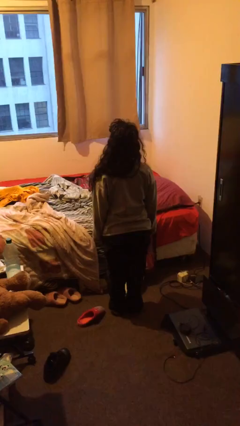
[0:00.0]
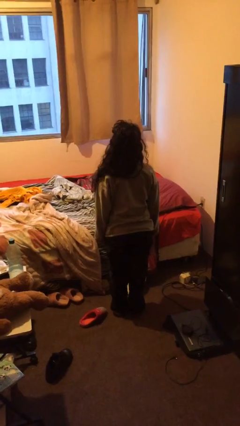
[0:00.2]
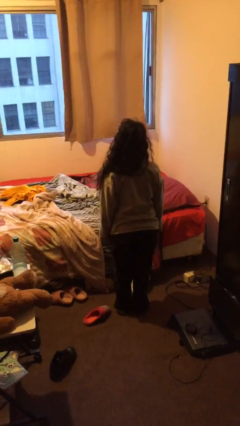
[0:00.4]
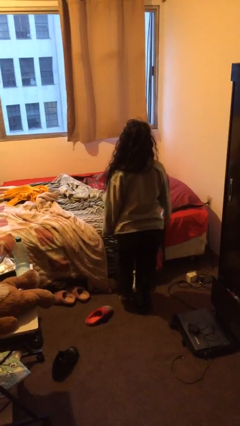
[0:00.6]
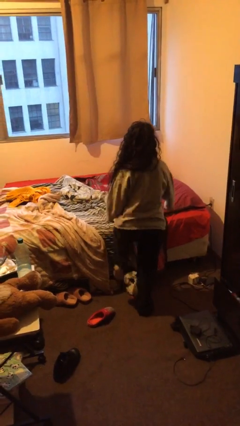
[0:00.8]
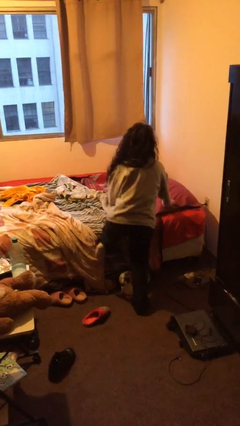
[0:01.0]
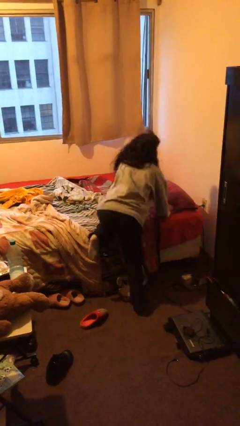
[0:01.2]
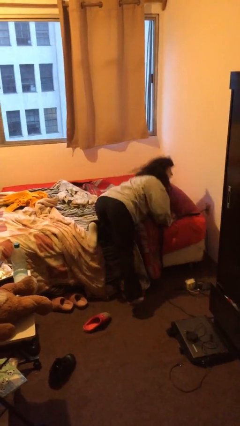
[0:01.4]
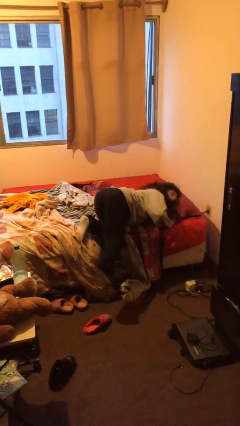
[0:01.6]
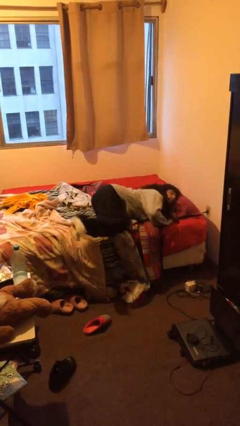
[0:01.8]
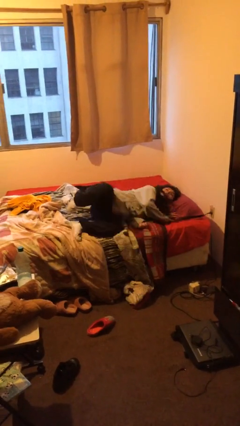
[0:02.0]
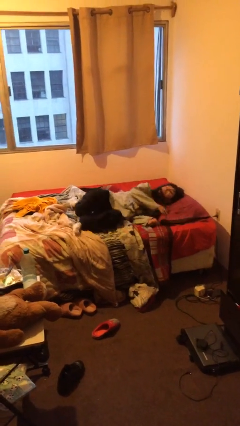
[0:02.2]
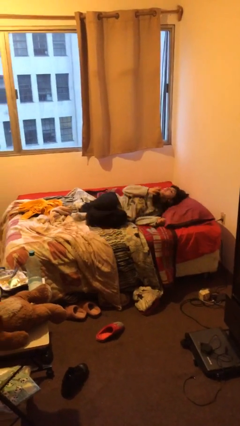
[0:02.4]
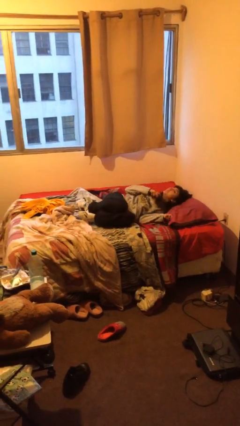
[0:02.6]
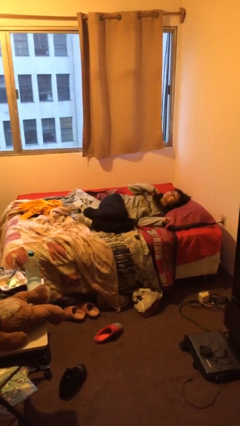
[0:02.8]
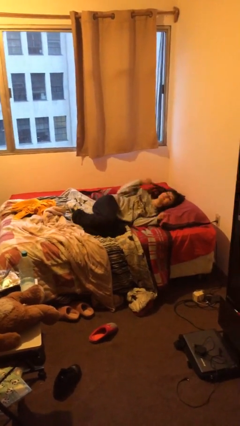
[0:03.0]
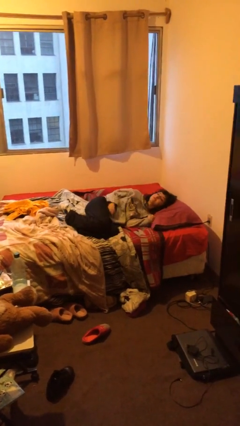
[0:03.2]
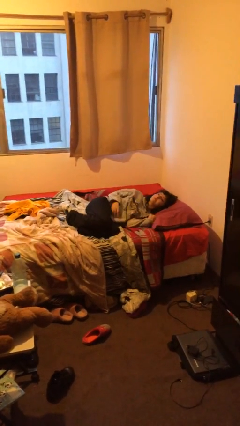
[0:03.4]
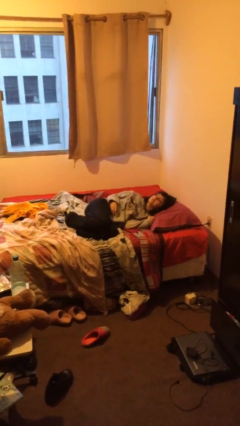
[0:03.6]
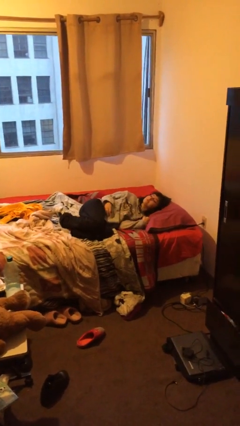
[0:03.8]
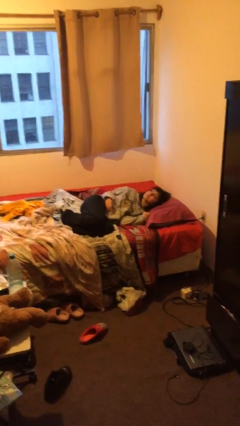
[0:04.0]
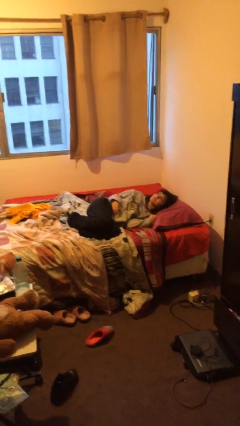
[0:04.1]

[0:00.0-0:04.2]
person lies down on bed

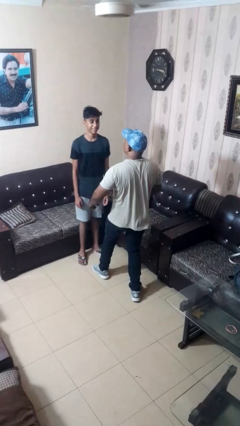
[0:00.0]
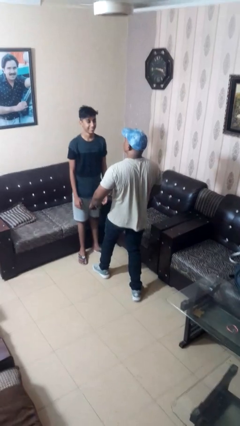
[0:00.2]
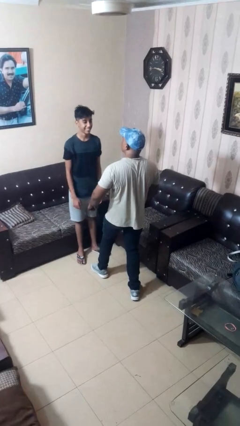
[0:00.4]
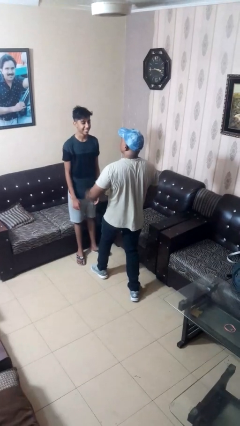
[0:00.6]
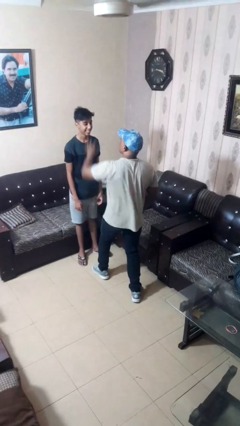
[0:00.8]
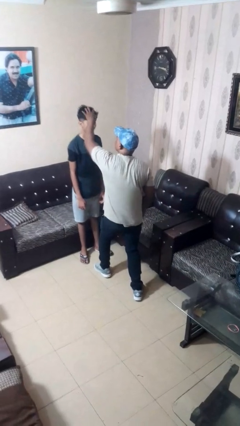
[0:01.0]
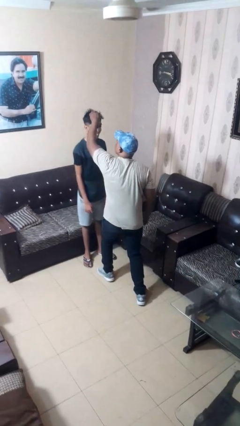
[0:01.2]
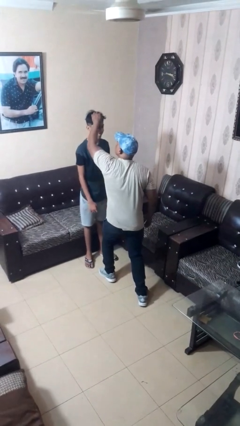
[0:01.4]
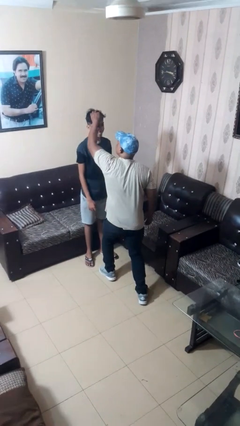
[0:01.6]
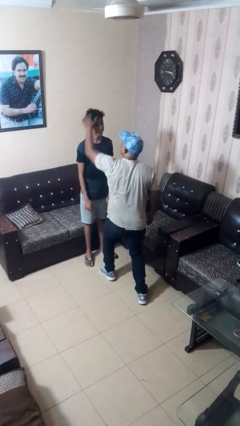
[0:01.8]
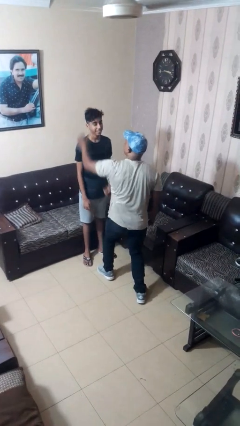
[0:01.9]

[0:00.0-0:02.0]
person grabs person by hair

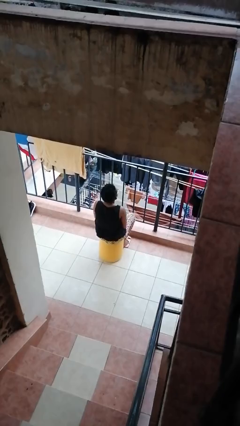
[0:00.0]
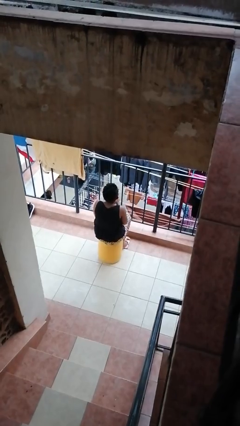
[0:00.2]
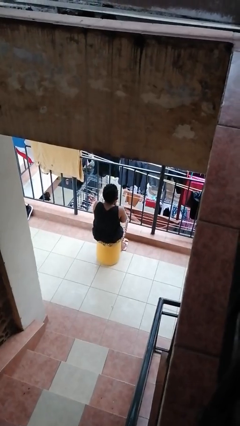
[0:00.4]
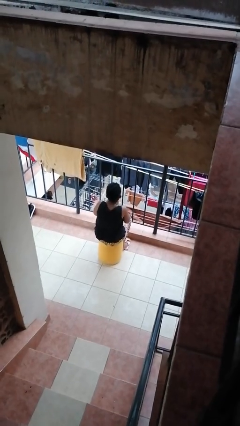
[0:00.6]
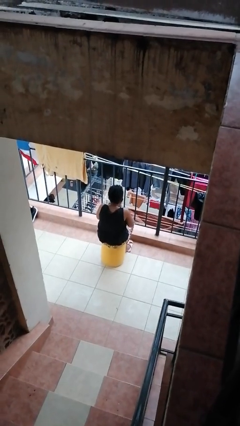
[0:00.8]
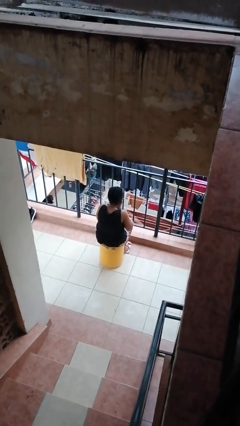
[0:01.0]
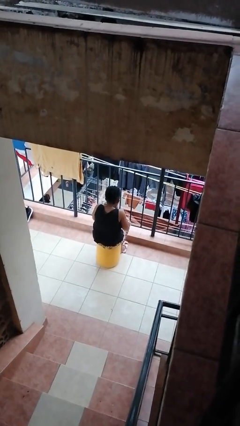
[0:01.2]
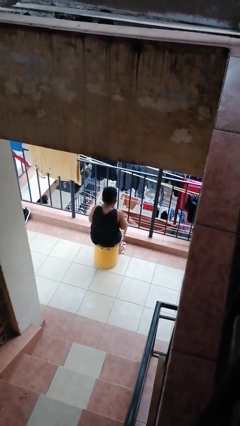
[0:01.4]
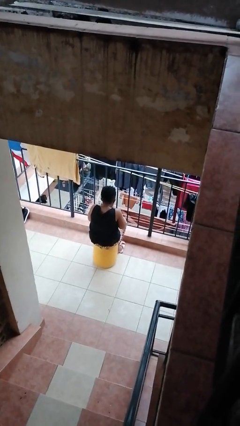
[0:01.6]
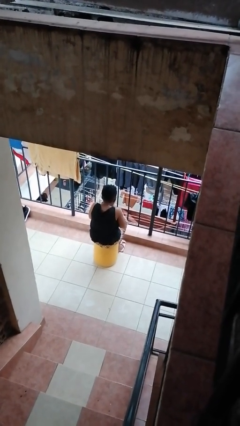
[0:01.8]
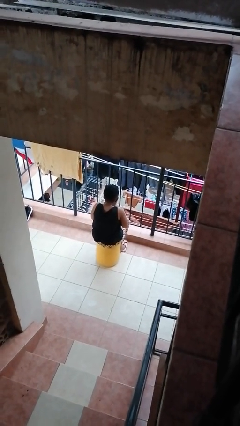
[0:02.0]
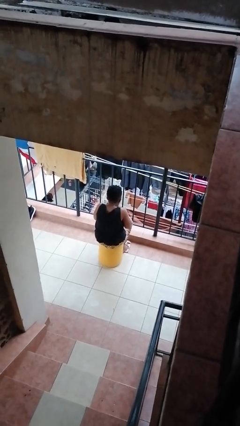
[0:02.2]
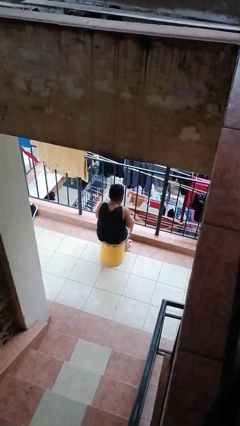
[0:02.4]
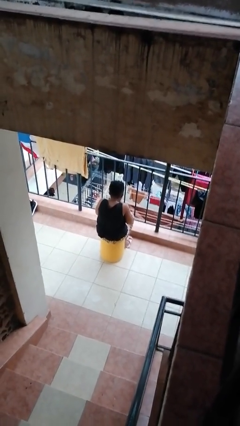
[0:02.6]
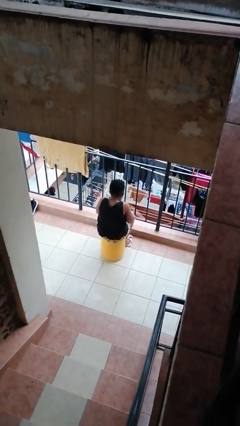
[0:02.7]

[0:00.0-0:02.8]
person blows into hands

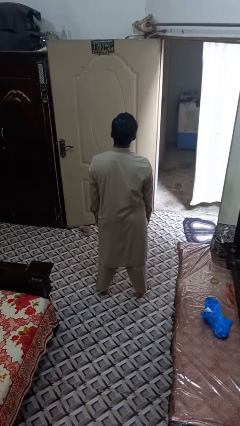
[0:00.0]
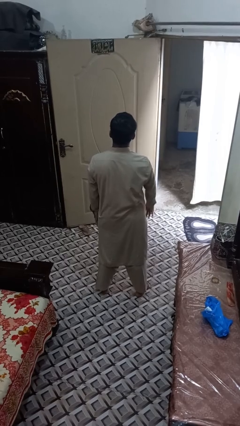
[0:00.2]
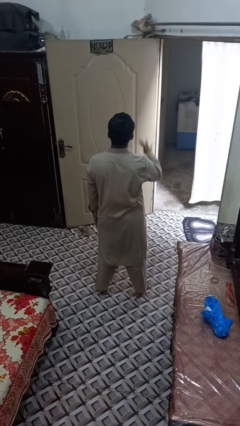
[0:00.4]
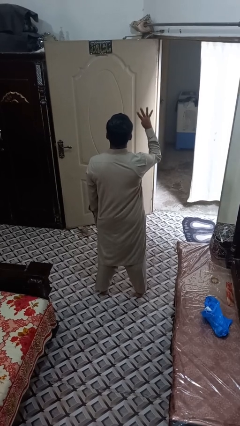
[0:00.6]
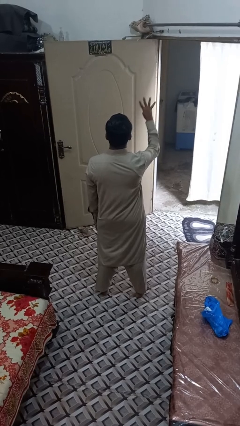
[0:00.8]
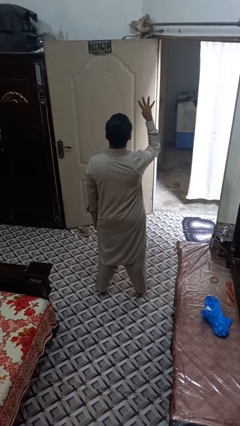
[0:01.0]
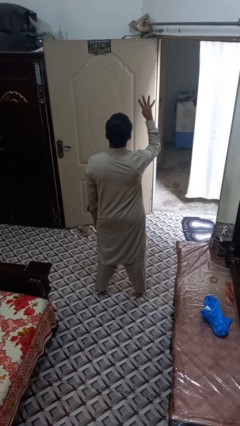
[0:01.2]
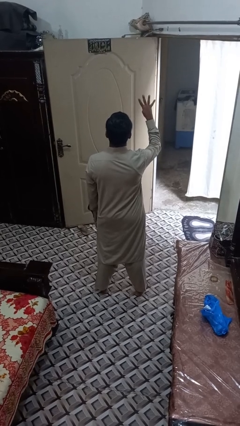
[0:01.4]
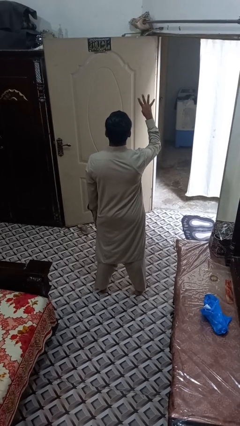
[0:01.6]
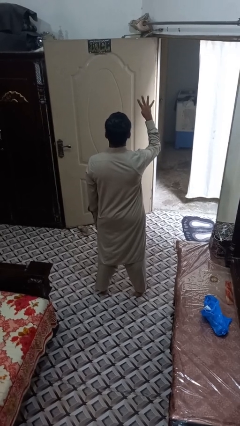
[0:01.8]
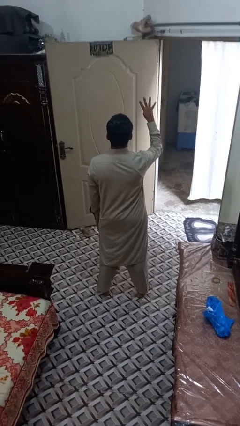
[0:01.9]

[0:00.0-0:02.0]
person gestures number four

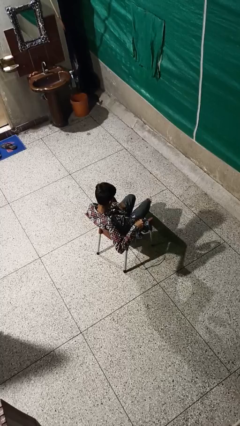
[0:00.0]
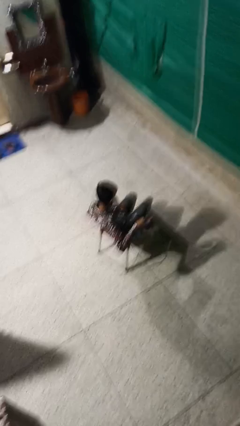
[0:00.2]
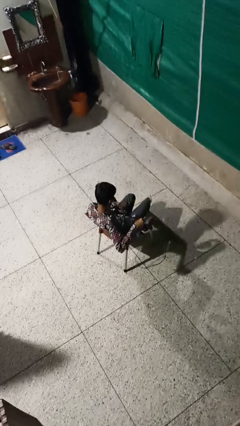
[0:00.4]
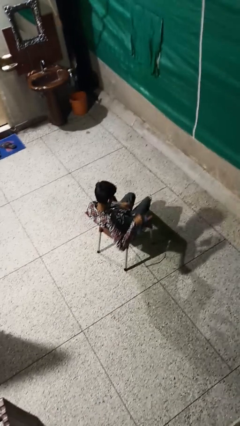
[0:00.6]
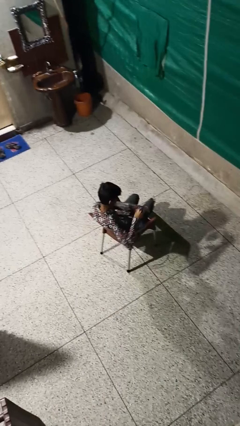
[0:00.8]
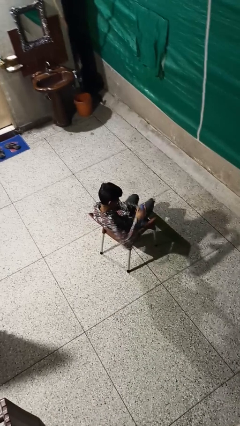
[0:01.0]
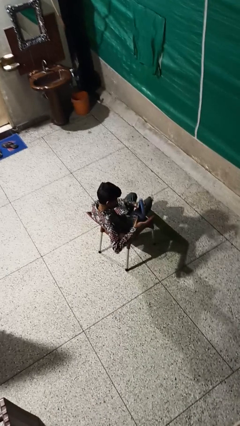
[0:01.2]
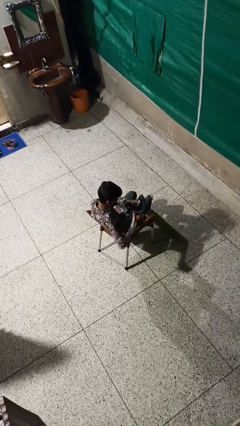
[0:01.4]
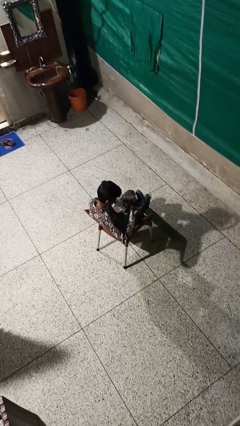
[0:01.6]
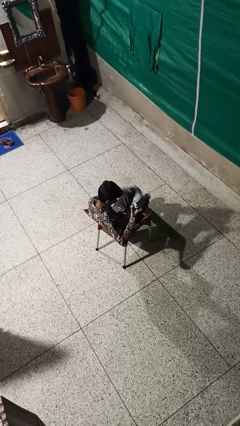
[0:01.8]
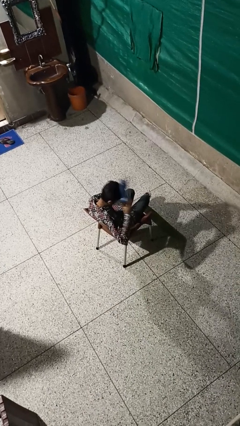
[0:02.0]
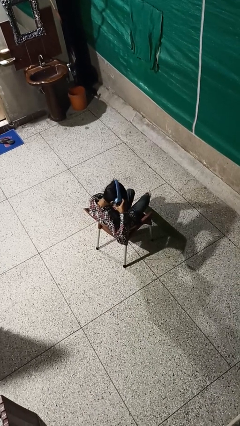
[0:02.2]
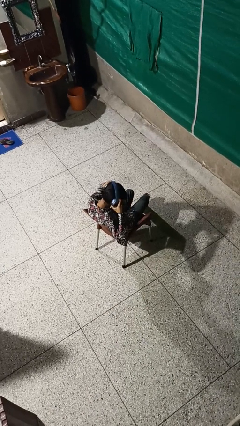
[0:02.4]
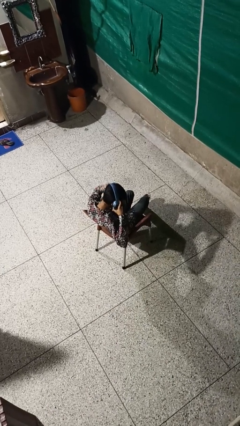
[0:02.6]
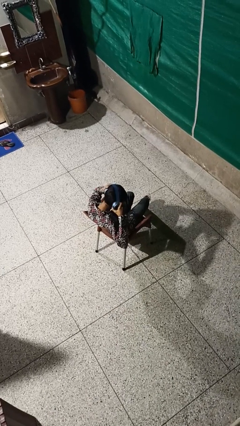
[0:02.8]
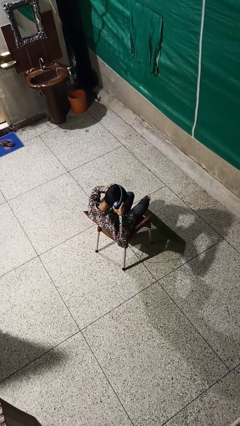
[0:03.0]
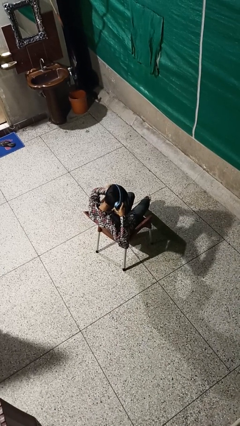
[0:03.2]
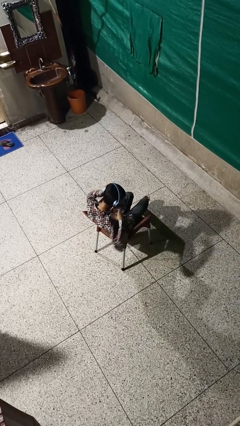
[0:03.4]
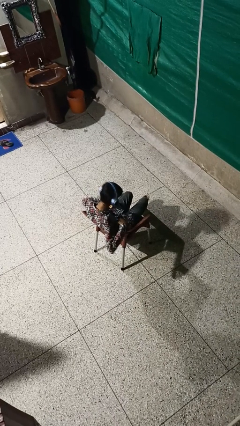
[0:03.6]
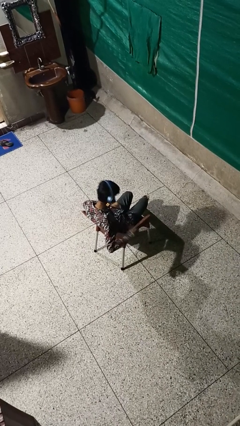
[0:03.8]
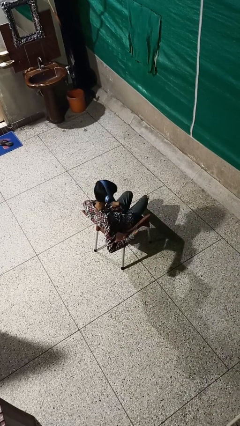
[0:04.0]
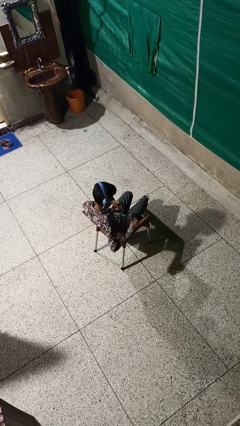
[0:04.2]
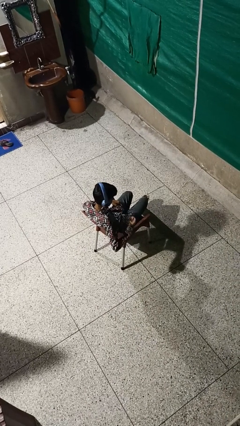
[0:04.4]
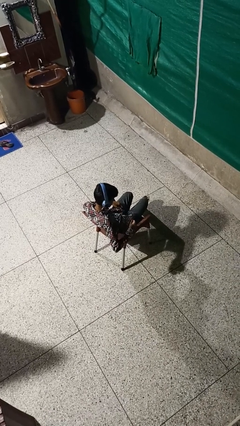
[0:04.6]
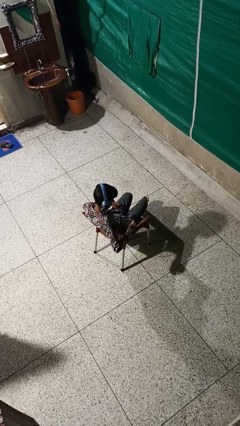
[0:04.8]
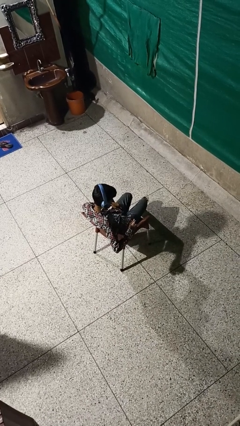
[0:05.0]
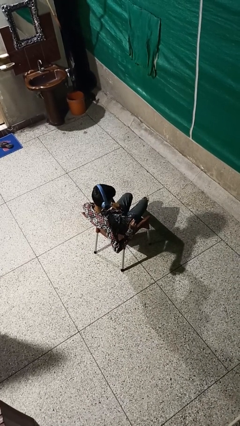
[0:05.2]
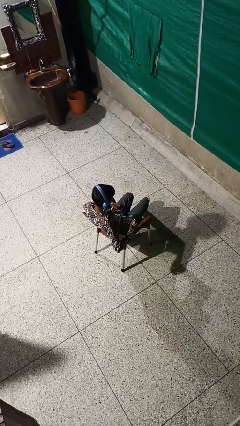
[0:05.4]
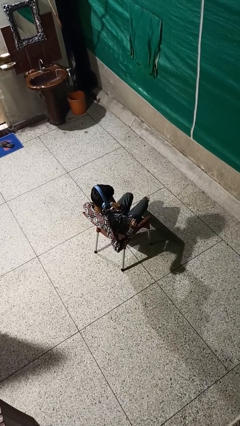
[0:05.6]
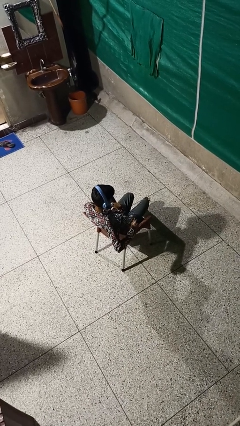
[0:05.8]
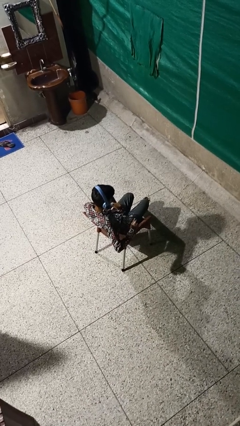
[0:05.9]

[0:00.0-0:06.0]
person puts on headphones

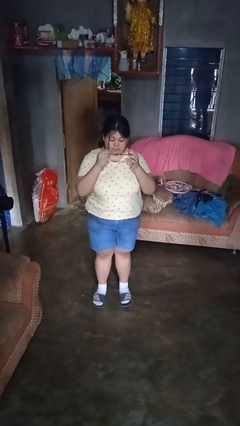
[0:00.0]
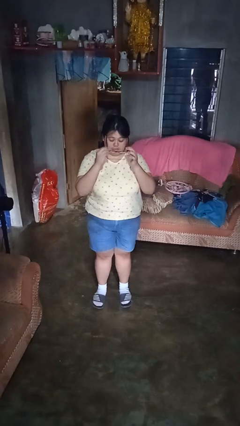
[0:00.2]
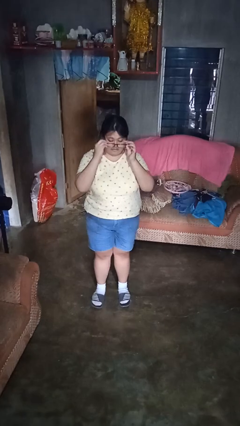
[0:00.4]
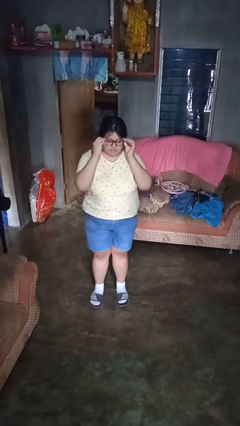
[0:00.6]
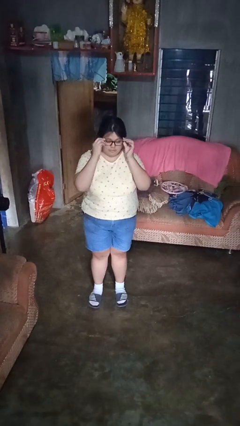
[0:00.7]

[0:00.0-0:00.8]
person puts on glasses
